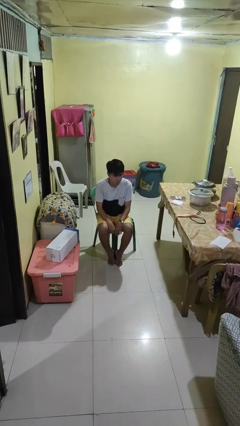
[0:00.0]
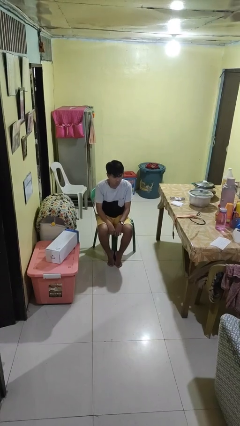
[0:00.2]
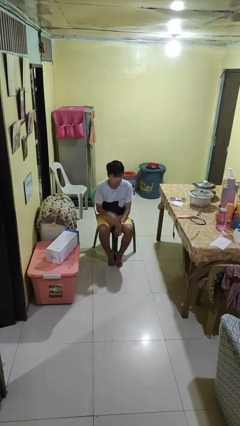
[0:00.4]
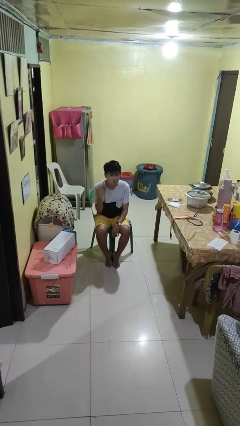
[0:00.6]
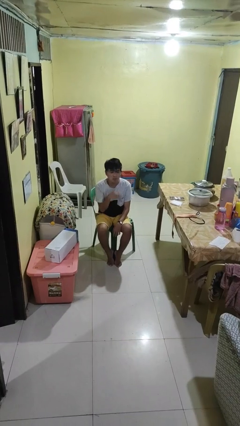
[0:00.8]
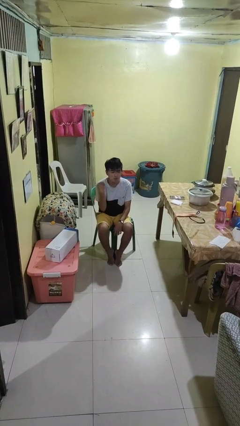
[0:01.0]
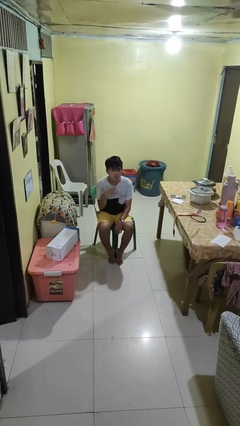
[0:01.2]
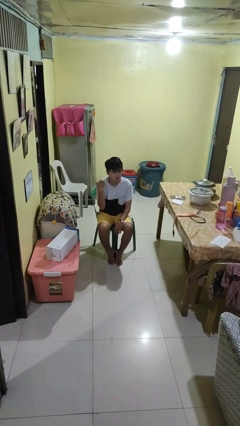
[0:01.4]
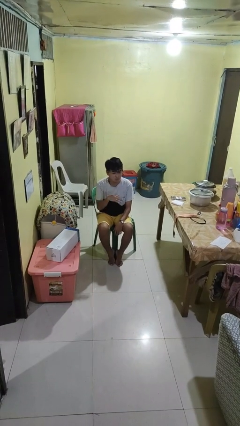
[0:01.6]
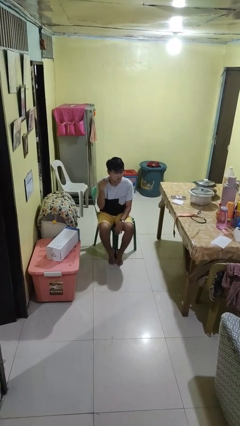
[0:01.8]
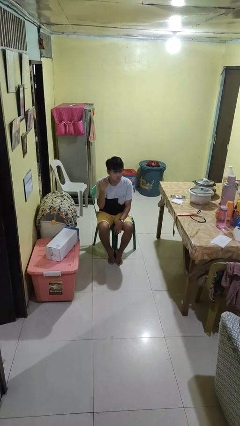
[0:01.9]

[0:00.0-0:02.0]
person gestures cut

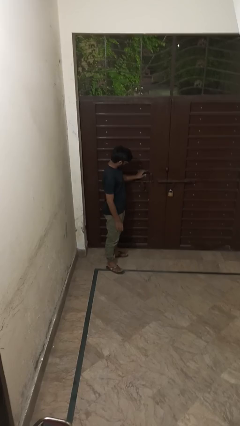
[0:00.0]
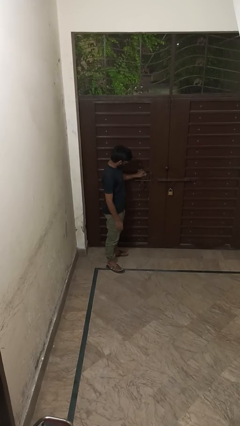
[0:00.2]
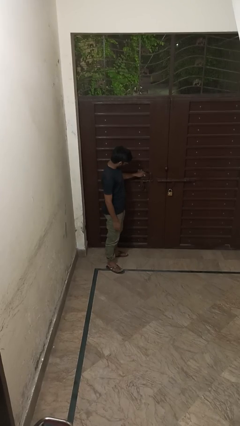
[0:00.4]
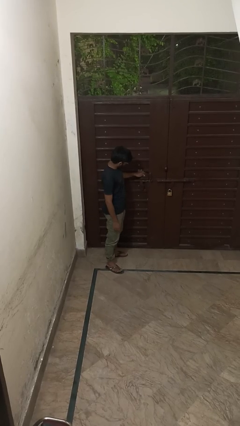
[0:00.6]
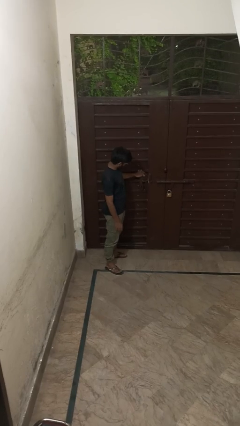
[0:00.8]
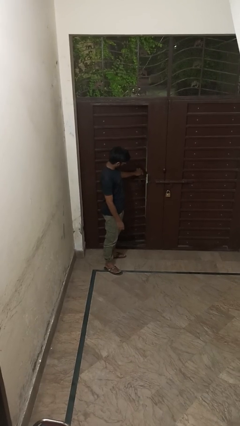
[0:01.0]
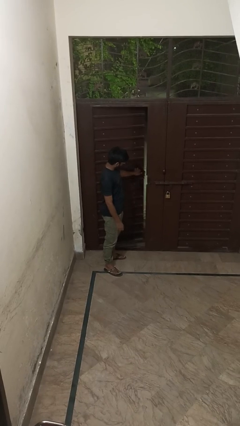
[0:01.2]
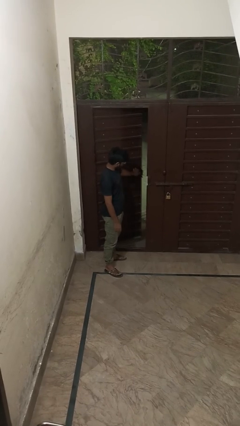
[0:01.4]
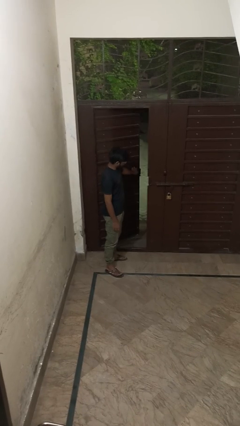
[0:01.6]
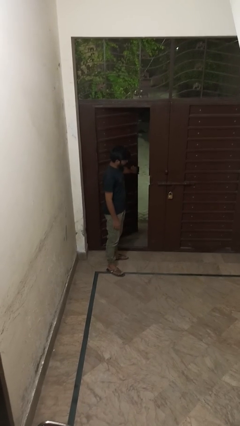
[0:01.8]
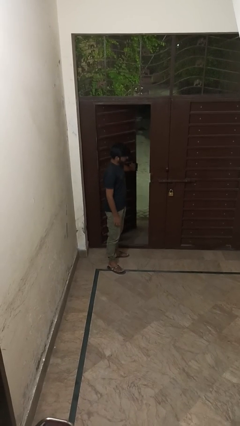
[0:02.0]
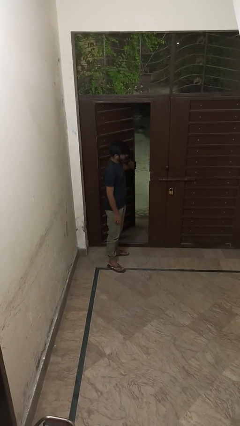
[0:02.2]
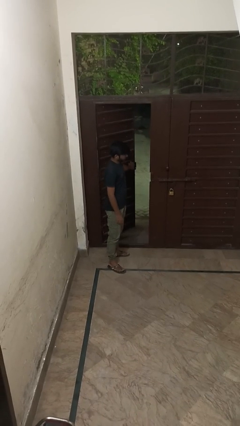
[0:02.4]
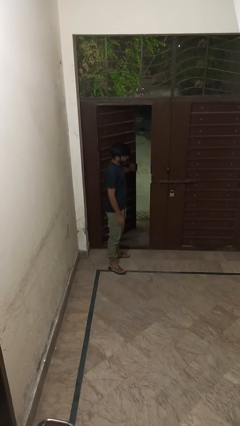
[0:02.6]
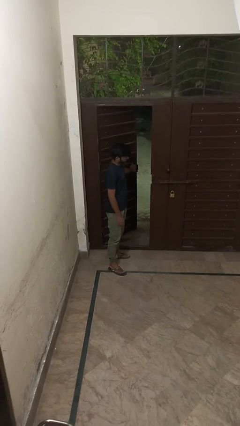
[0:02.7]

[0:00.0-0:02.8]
person opens facility door

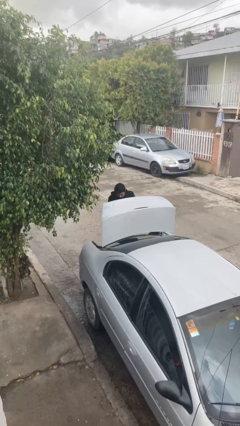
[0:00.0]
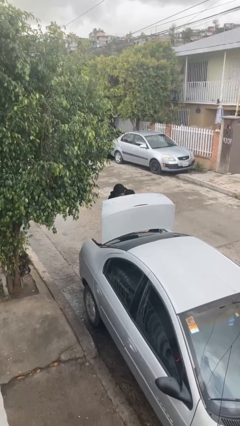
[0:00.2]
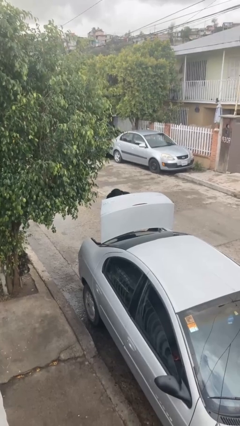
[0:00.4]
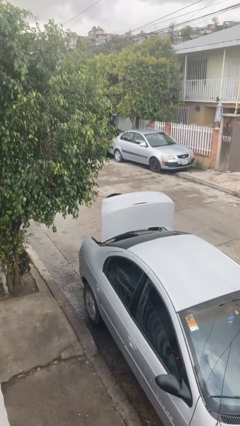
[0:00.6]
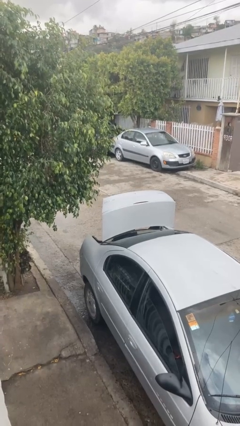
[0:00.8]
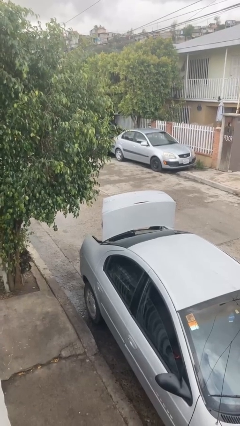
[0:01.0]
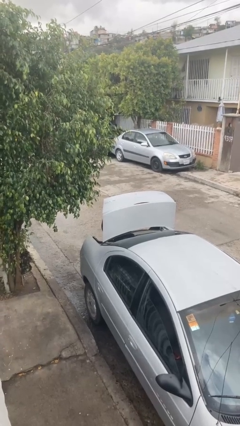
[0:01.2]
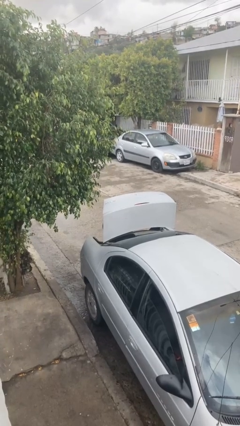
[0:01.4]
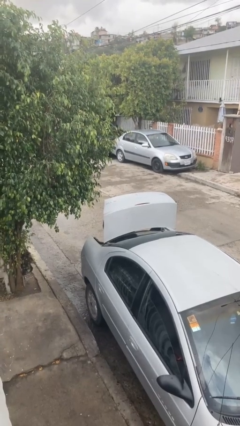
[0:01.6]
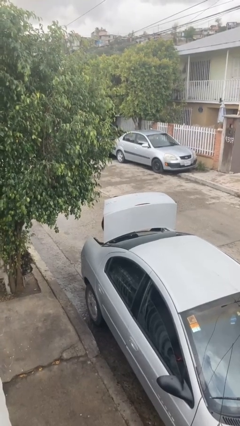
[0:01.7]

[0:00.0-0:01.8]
person loads car

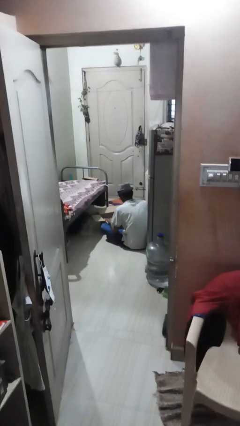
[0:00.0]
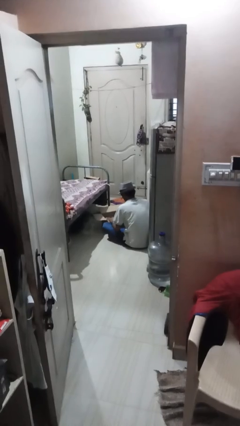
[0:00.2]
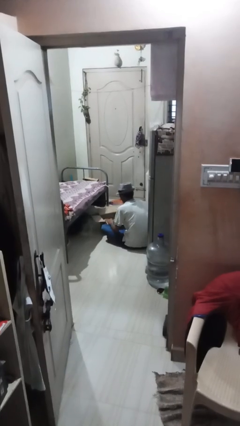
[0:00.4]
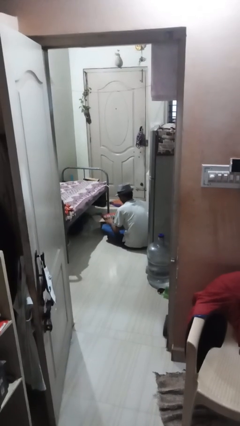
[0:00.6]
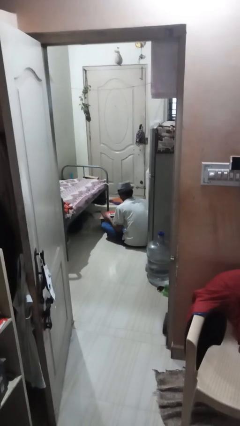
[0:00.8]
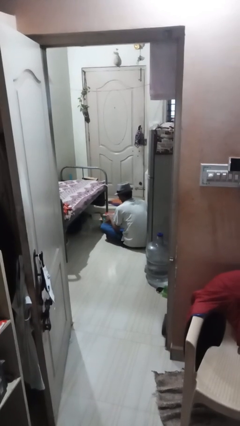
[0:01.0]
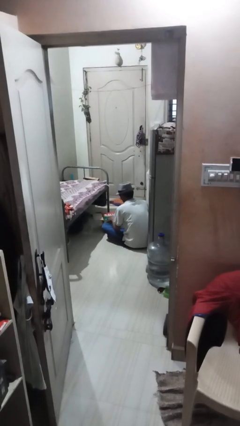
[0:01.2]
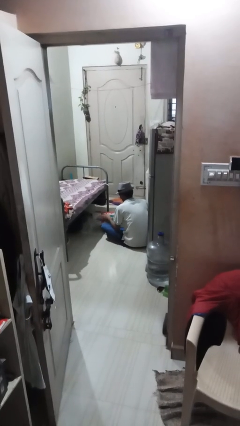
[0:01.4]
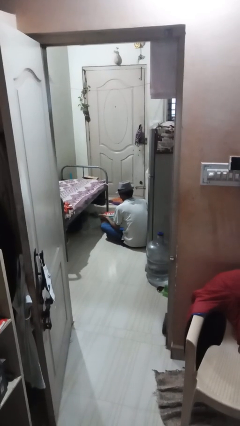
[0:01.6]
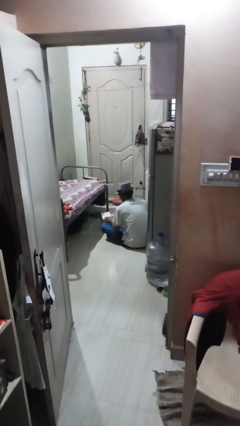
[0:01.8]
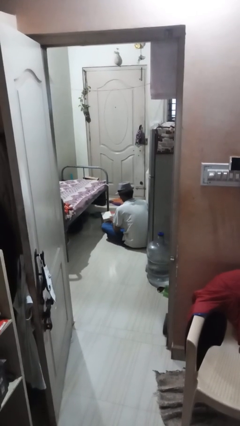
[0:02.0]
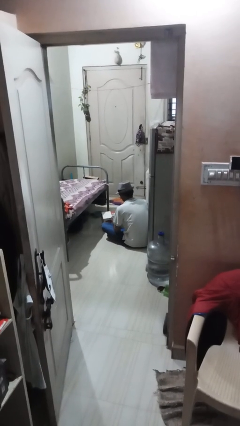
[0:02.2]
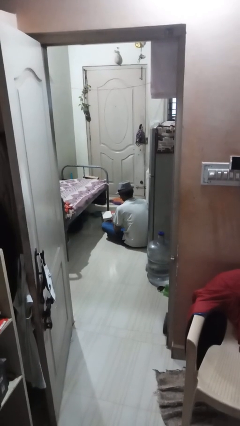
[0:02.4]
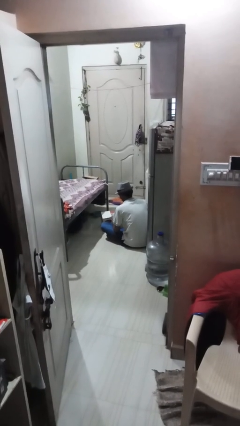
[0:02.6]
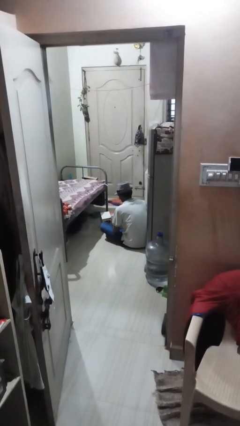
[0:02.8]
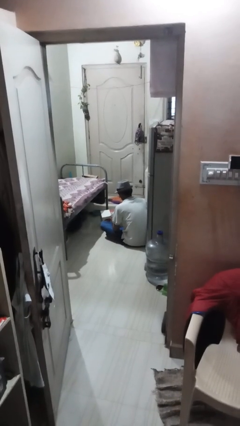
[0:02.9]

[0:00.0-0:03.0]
person closes box

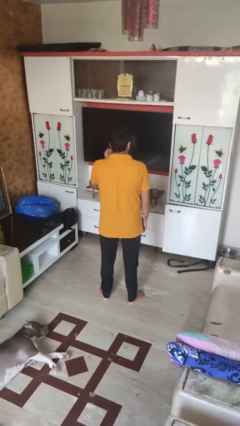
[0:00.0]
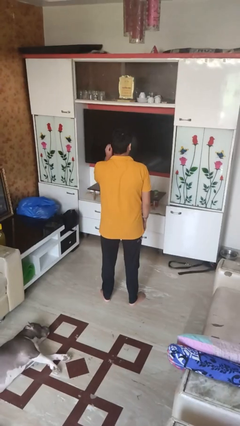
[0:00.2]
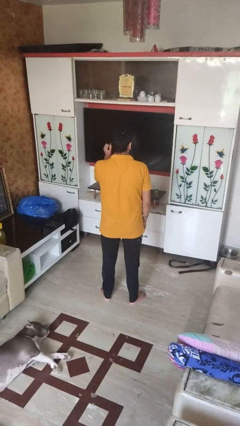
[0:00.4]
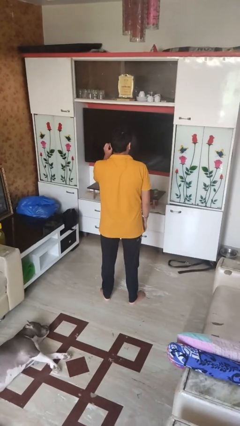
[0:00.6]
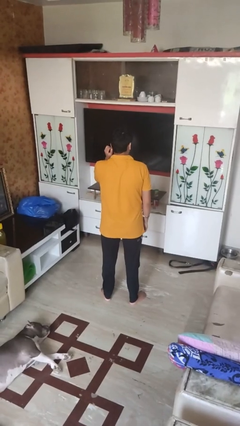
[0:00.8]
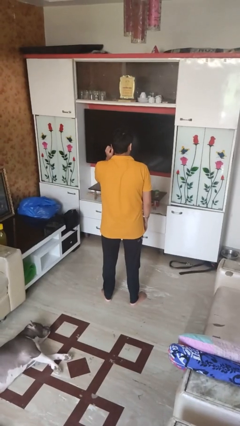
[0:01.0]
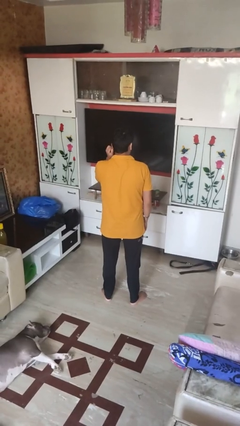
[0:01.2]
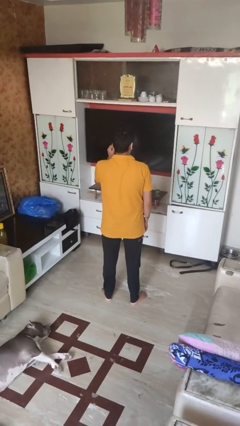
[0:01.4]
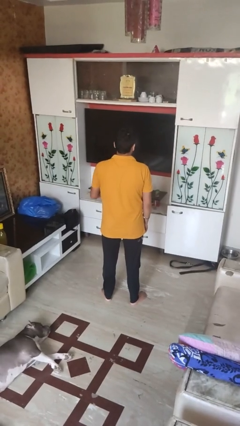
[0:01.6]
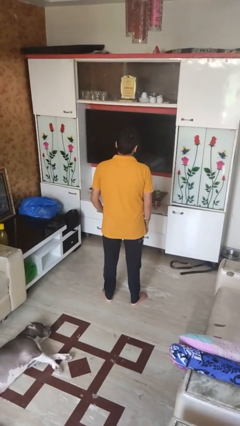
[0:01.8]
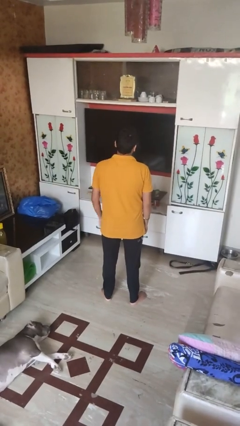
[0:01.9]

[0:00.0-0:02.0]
person touches earlobe

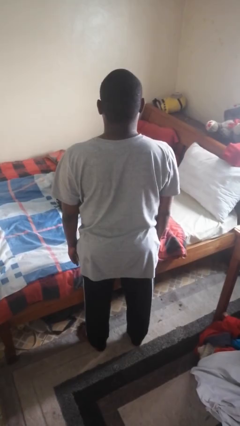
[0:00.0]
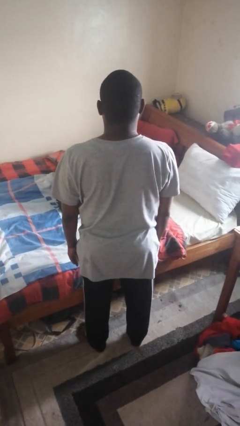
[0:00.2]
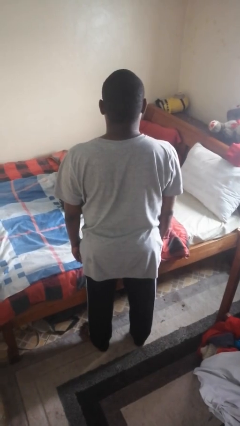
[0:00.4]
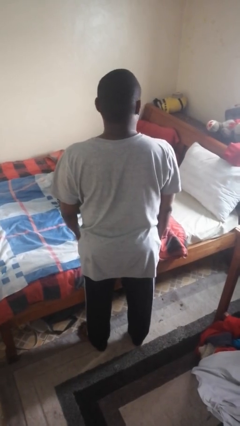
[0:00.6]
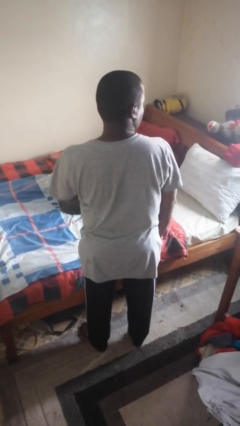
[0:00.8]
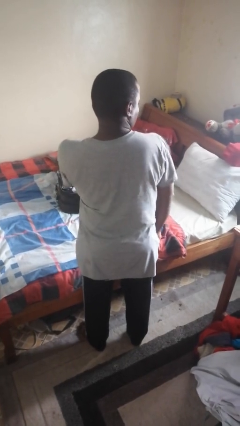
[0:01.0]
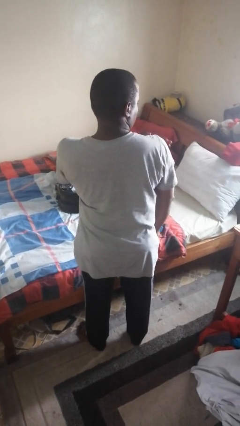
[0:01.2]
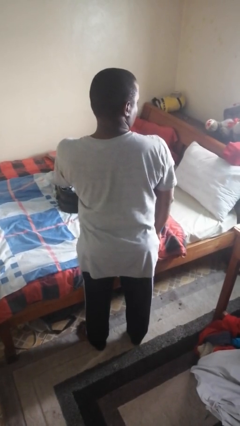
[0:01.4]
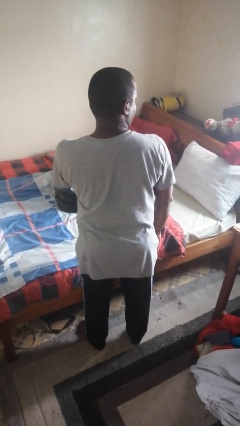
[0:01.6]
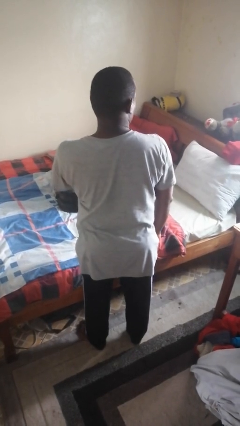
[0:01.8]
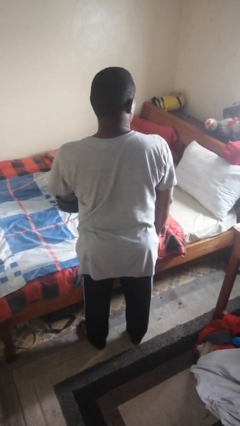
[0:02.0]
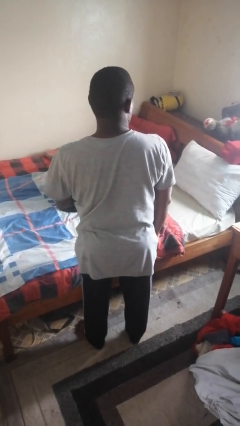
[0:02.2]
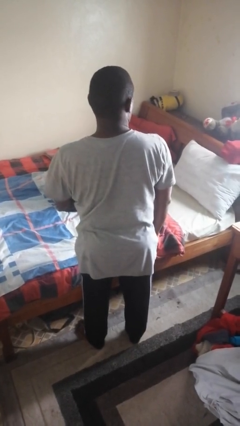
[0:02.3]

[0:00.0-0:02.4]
person swats bug

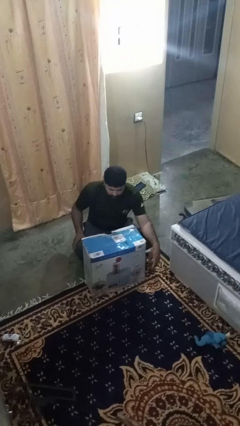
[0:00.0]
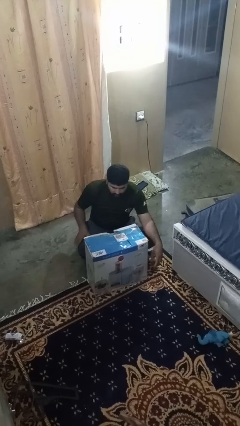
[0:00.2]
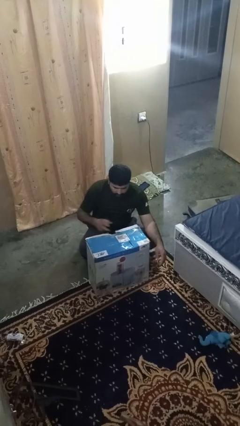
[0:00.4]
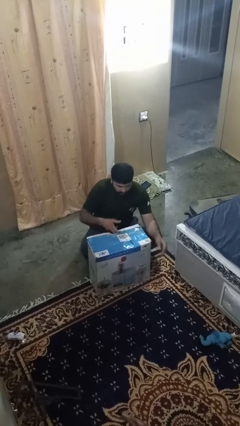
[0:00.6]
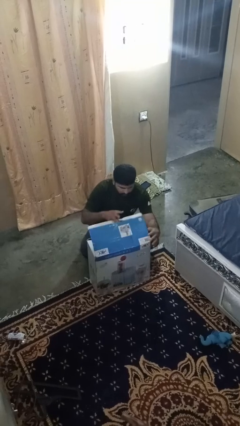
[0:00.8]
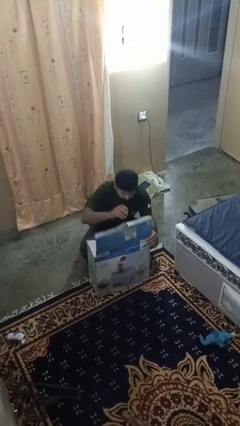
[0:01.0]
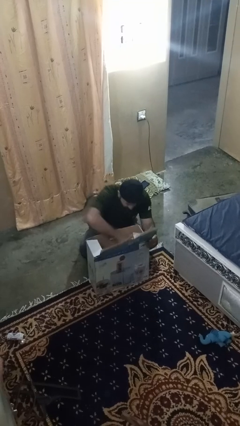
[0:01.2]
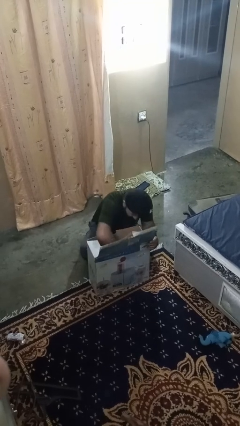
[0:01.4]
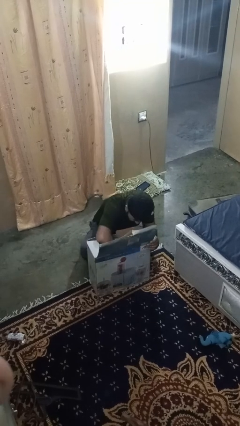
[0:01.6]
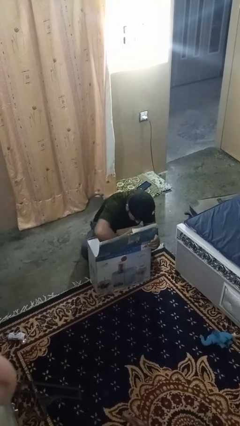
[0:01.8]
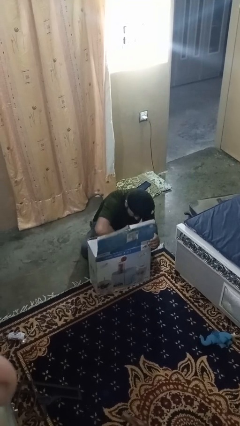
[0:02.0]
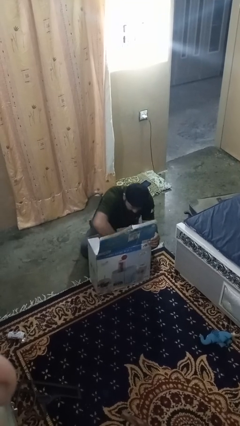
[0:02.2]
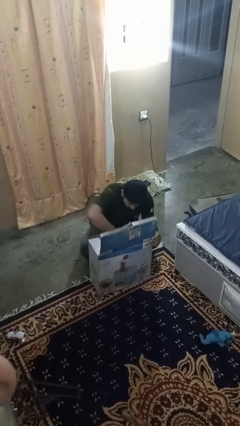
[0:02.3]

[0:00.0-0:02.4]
person searches in box

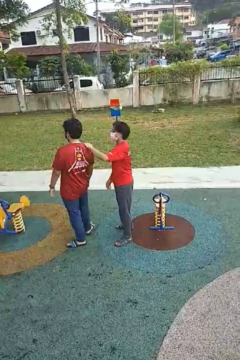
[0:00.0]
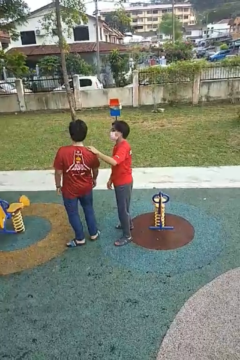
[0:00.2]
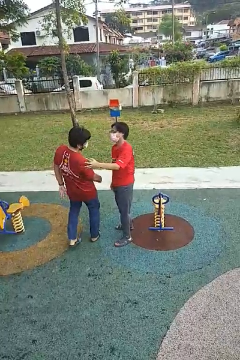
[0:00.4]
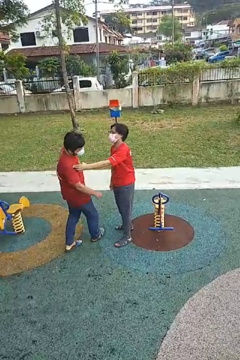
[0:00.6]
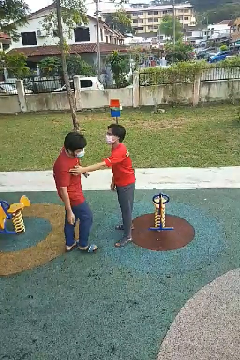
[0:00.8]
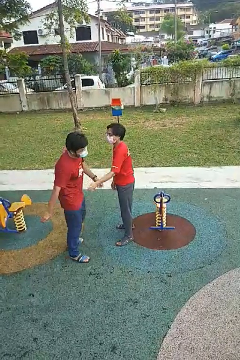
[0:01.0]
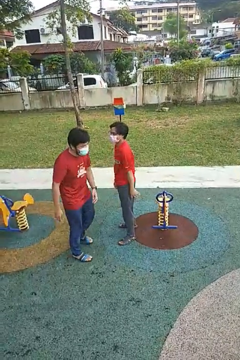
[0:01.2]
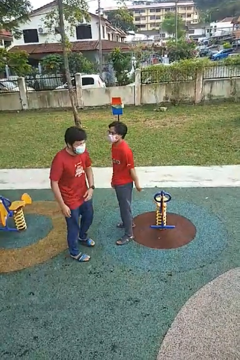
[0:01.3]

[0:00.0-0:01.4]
person spins person around
